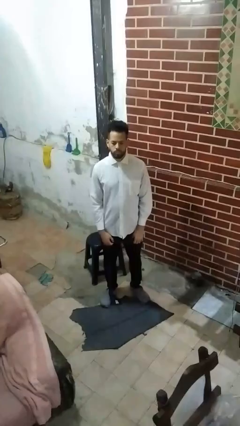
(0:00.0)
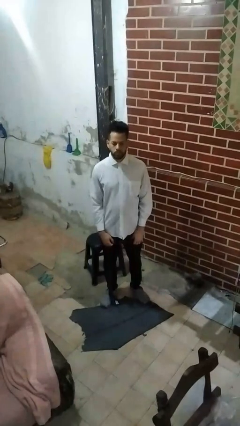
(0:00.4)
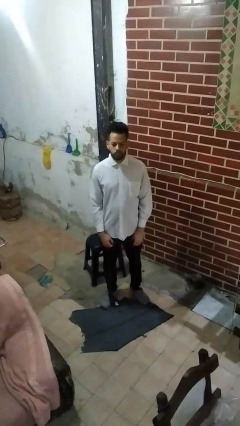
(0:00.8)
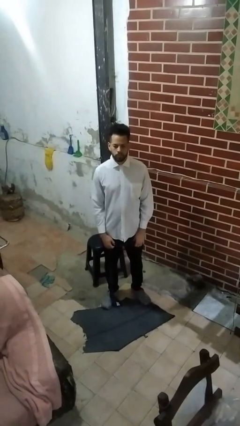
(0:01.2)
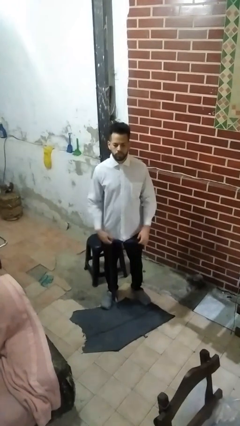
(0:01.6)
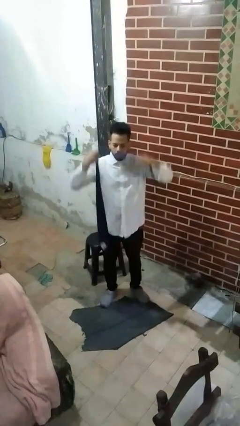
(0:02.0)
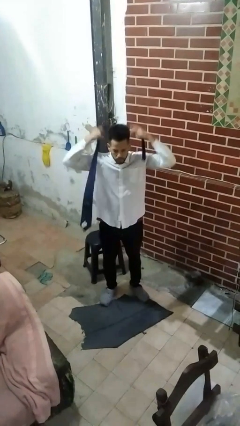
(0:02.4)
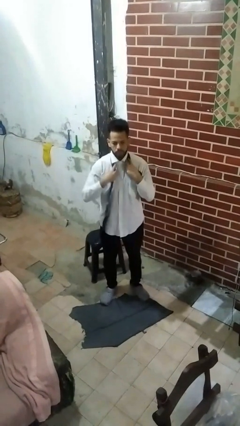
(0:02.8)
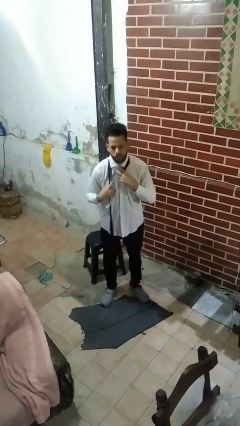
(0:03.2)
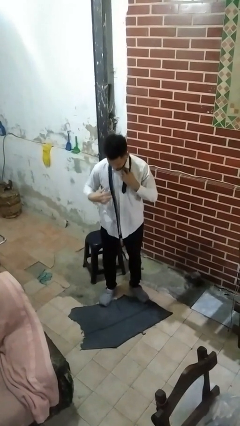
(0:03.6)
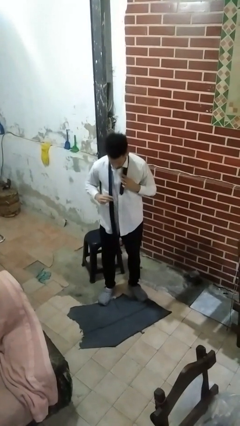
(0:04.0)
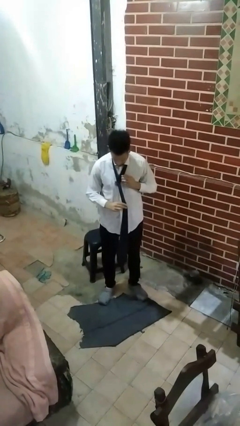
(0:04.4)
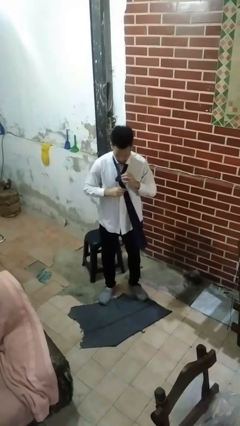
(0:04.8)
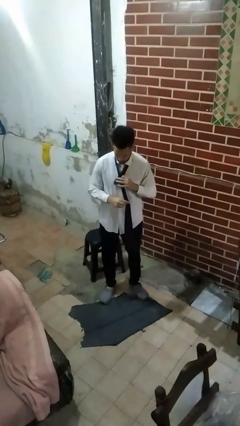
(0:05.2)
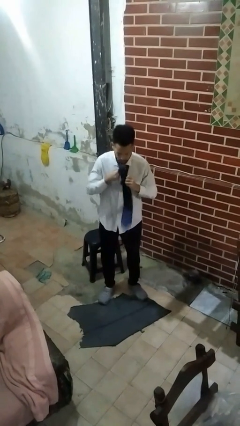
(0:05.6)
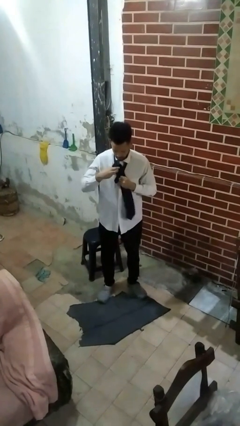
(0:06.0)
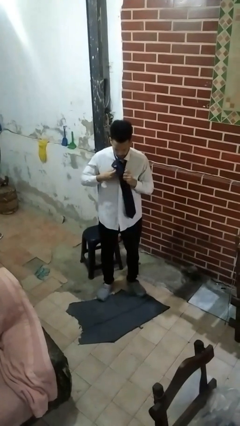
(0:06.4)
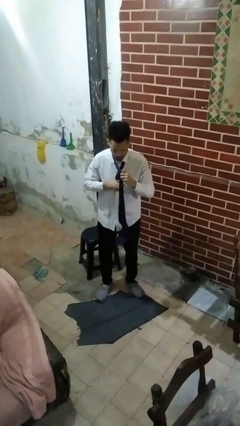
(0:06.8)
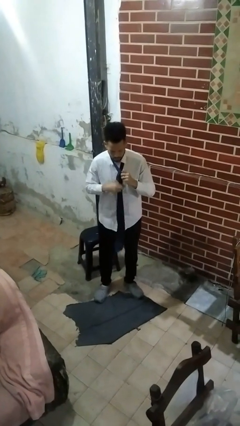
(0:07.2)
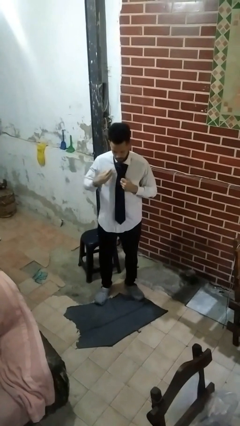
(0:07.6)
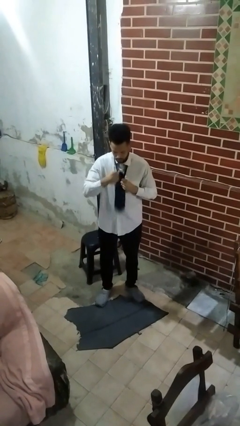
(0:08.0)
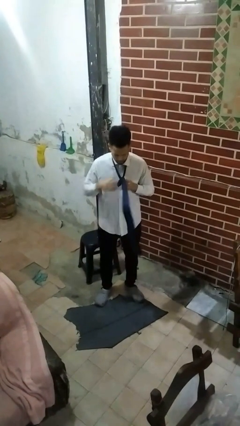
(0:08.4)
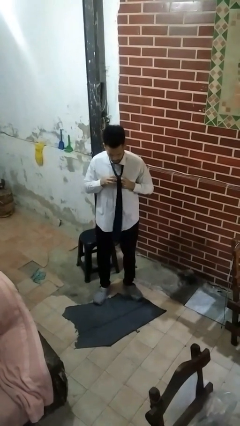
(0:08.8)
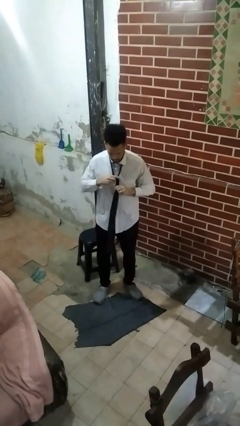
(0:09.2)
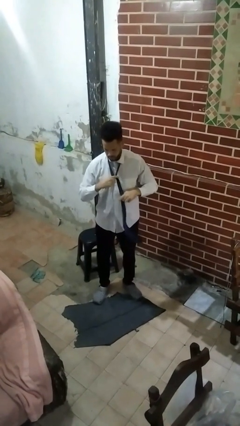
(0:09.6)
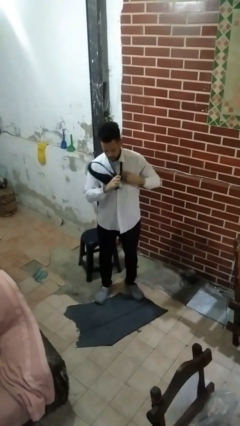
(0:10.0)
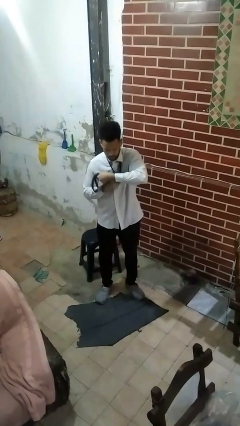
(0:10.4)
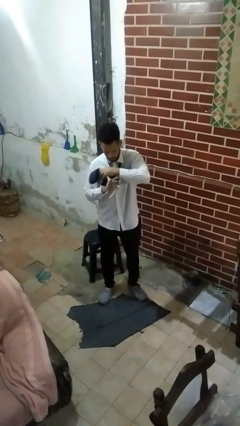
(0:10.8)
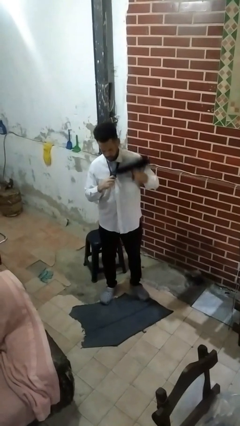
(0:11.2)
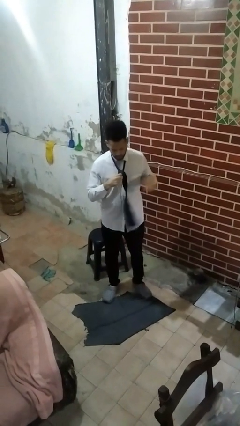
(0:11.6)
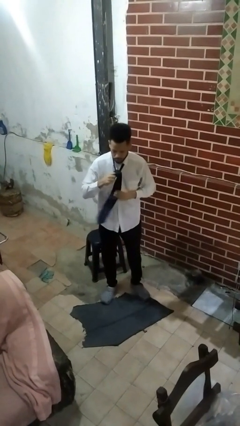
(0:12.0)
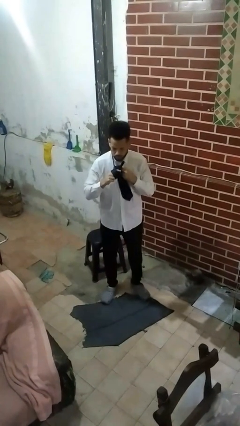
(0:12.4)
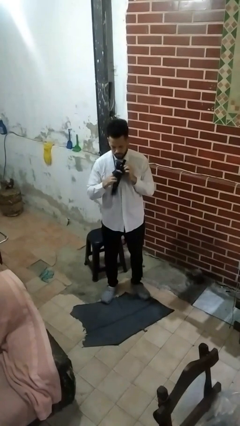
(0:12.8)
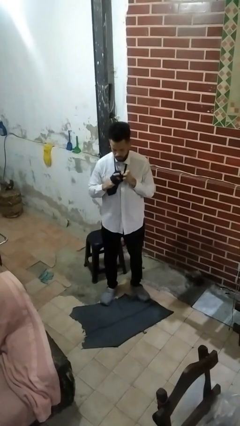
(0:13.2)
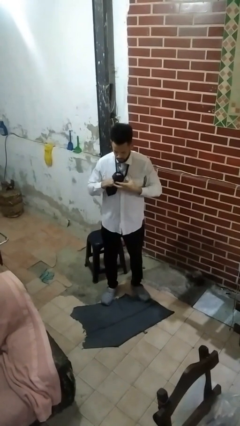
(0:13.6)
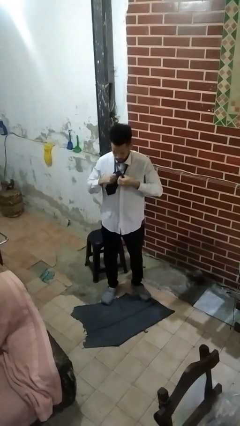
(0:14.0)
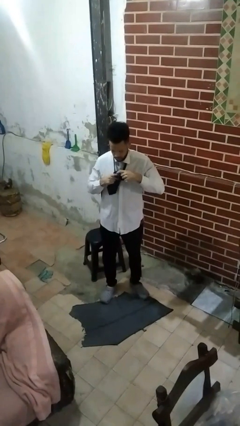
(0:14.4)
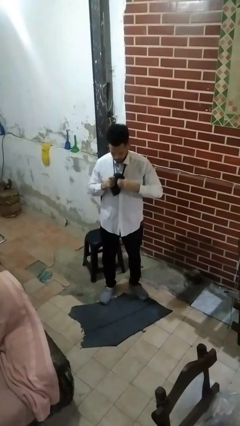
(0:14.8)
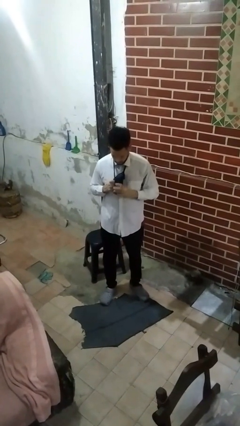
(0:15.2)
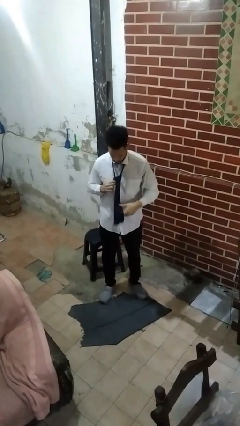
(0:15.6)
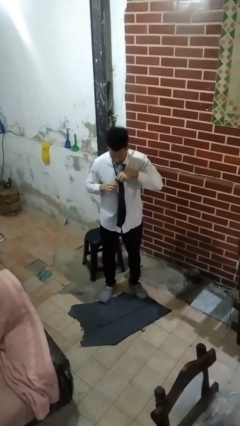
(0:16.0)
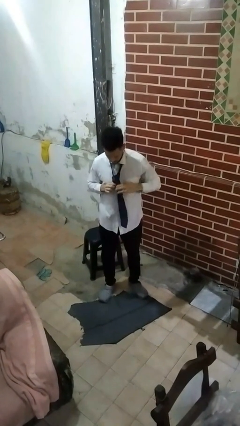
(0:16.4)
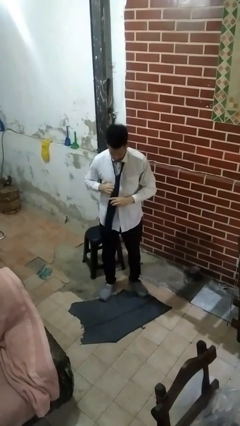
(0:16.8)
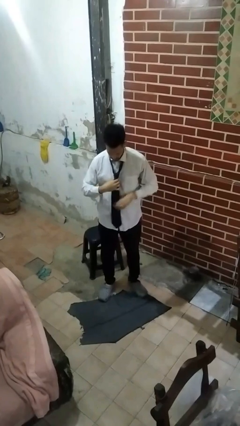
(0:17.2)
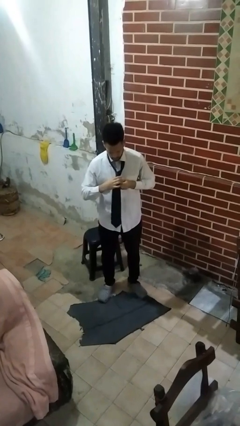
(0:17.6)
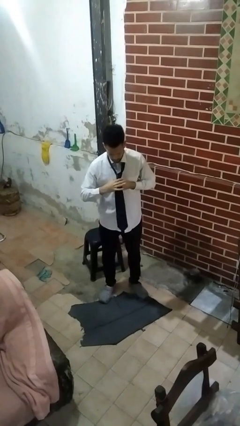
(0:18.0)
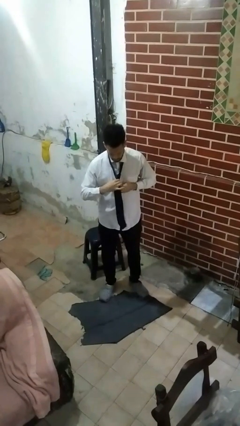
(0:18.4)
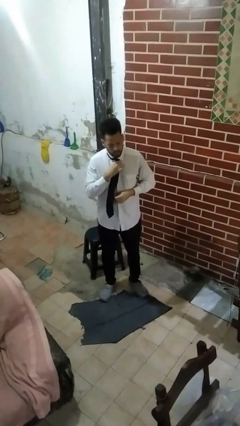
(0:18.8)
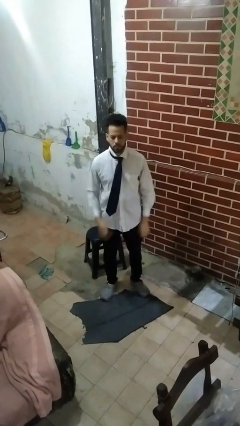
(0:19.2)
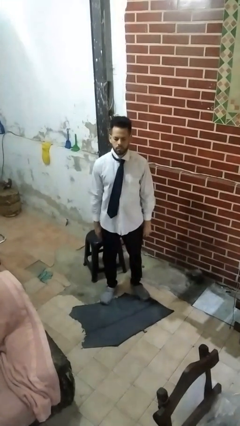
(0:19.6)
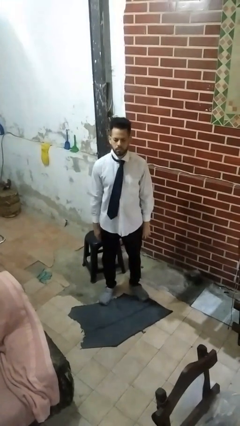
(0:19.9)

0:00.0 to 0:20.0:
person puts on necktie

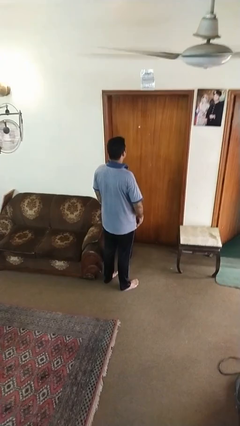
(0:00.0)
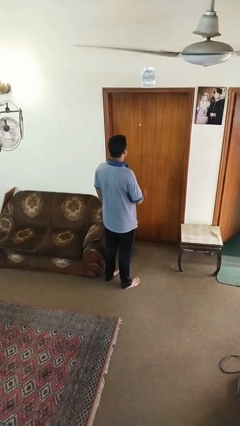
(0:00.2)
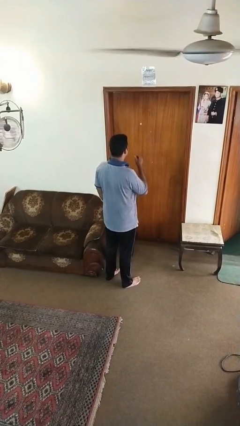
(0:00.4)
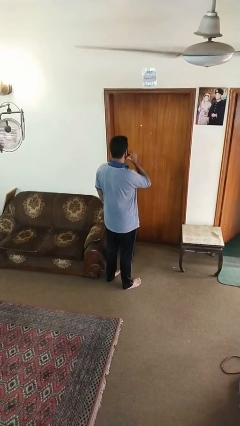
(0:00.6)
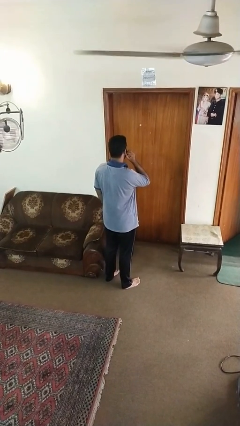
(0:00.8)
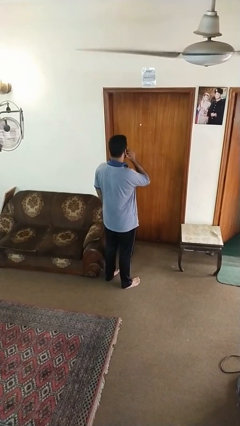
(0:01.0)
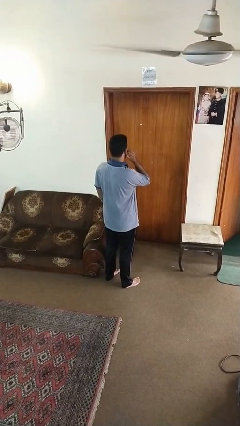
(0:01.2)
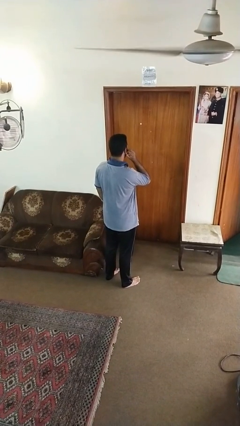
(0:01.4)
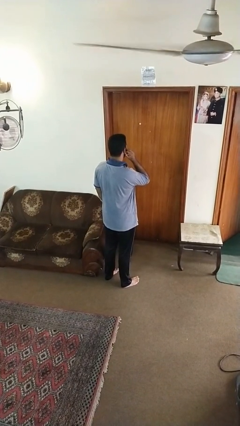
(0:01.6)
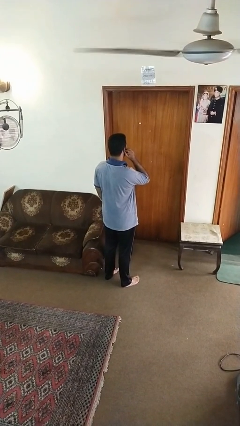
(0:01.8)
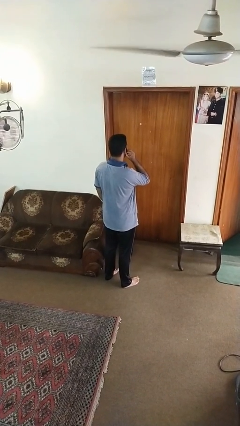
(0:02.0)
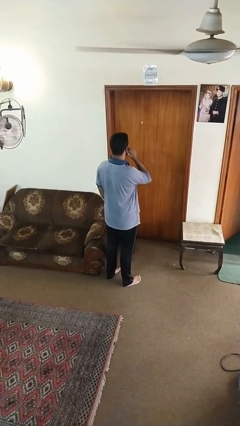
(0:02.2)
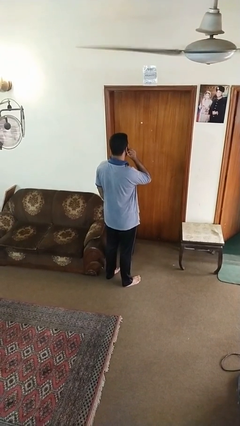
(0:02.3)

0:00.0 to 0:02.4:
person touches earlobe

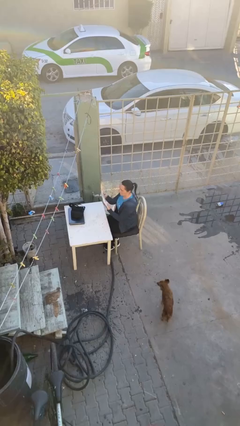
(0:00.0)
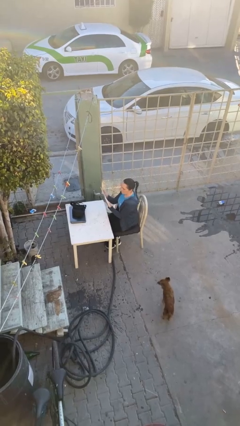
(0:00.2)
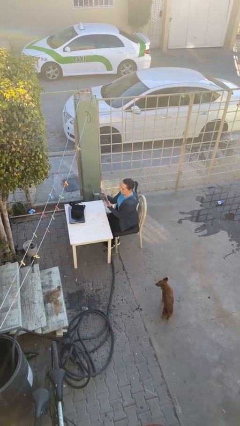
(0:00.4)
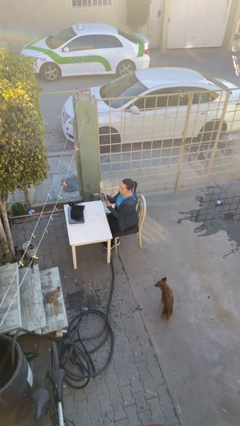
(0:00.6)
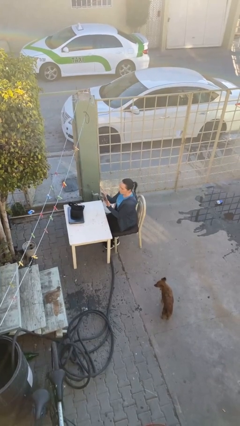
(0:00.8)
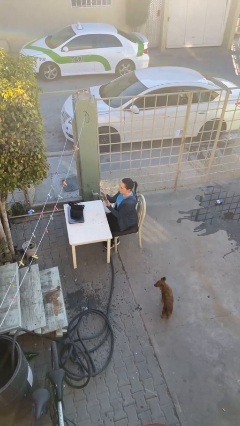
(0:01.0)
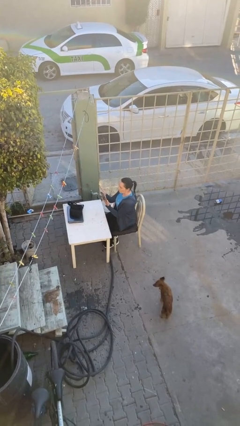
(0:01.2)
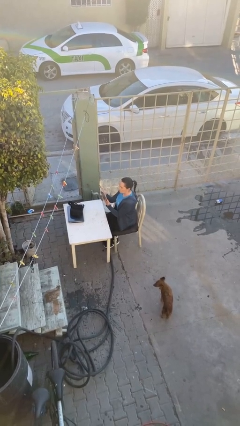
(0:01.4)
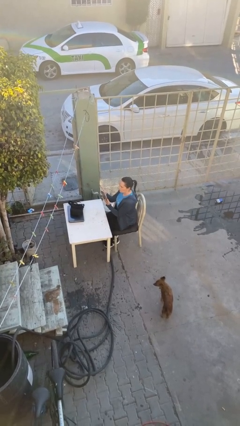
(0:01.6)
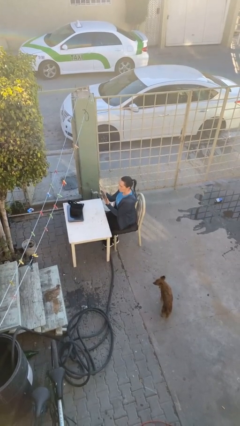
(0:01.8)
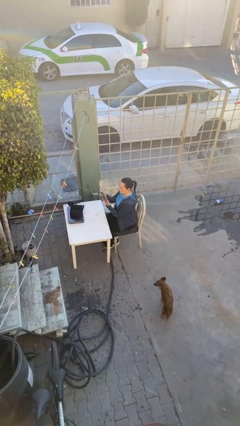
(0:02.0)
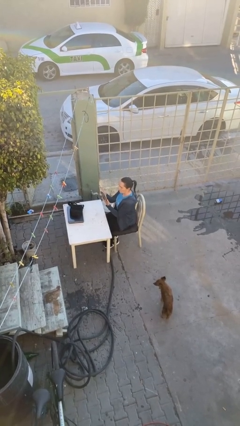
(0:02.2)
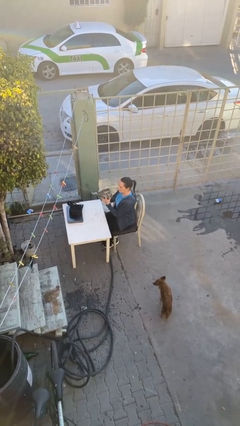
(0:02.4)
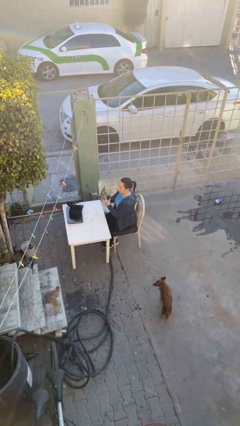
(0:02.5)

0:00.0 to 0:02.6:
person reads document

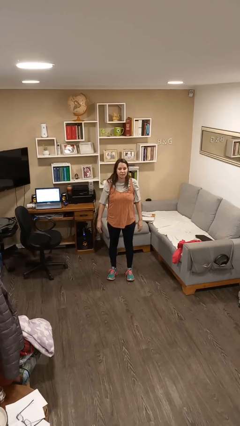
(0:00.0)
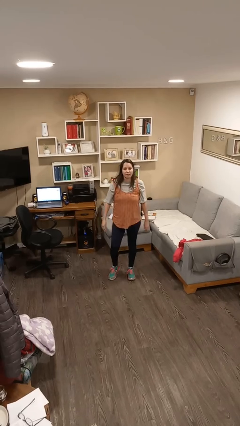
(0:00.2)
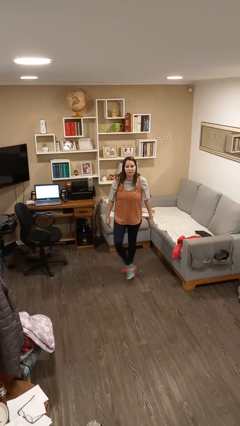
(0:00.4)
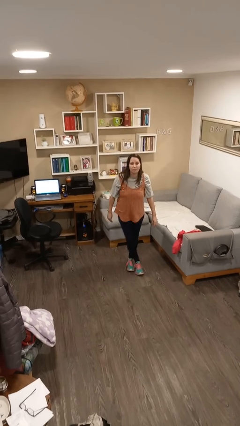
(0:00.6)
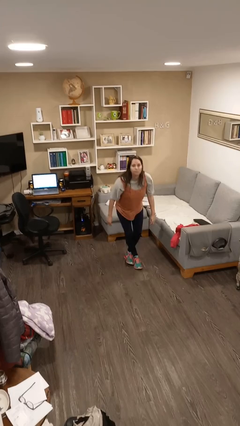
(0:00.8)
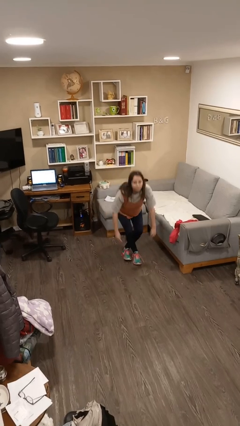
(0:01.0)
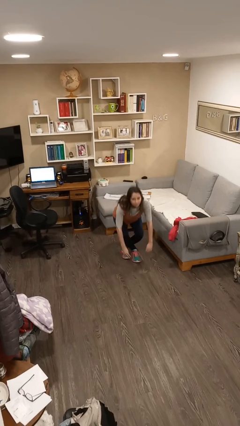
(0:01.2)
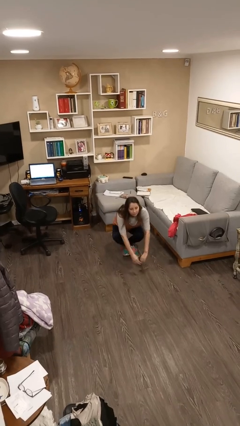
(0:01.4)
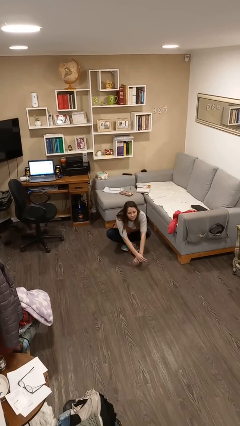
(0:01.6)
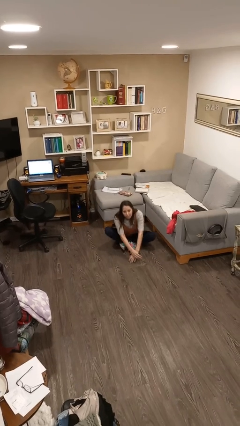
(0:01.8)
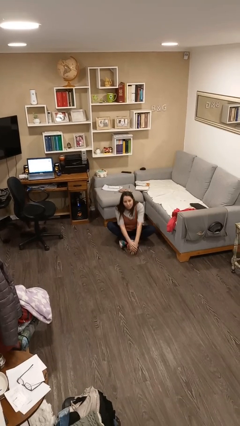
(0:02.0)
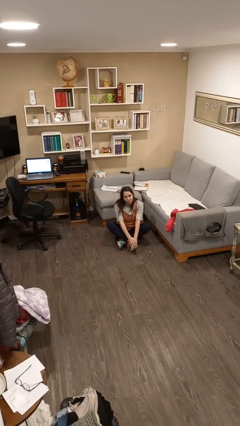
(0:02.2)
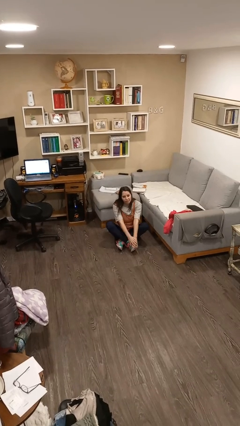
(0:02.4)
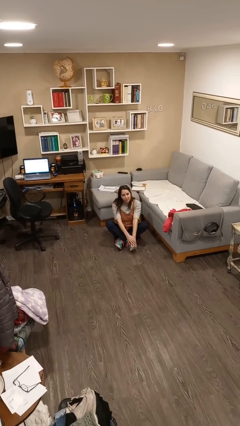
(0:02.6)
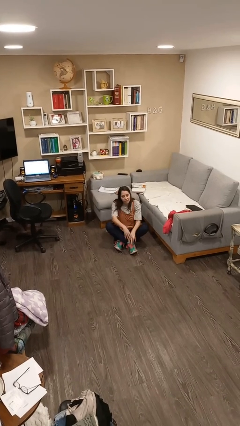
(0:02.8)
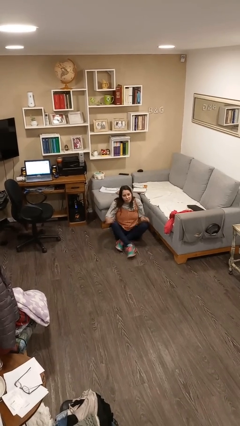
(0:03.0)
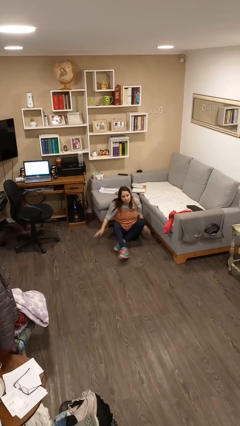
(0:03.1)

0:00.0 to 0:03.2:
person sits crisscross
